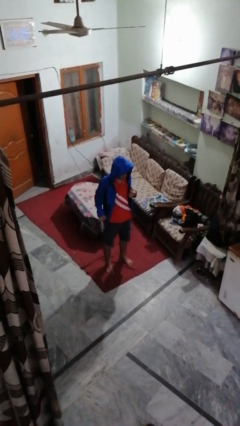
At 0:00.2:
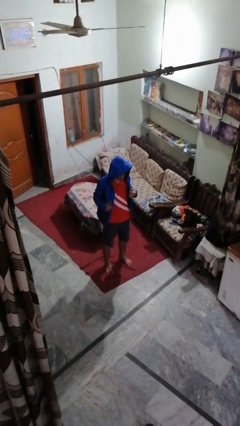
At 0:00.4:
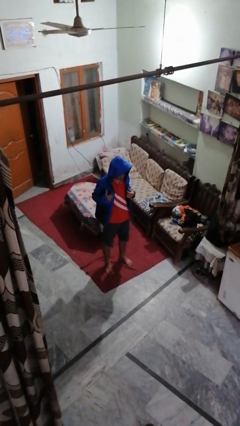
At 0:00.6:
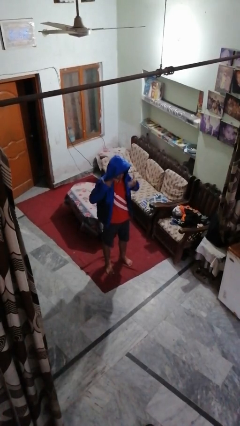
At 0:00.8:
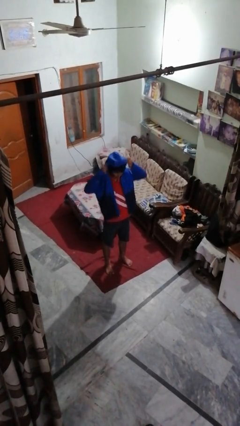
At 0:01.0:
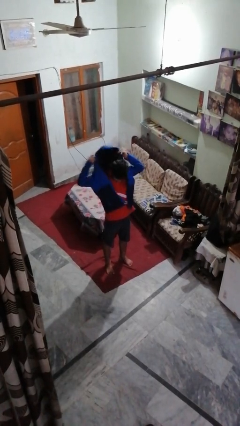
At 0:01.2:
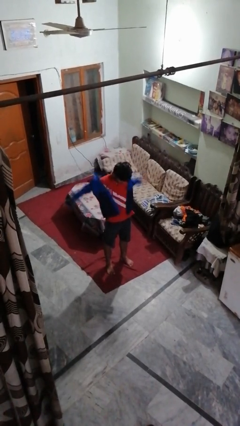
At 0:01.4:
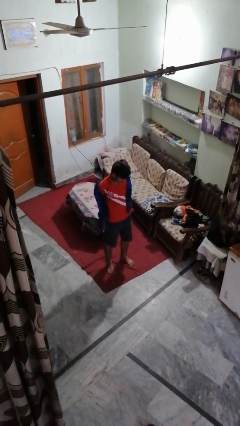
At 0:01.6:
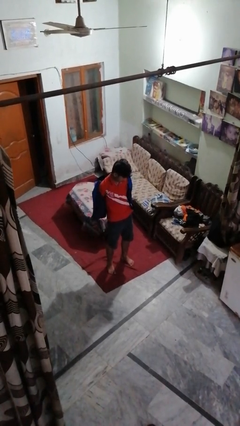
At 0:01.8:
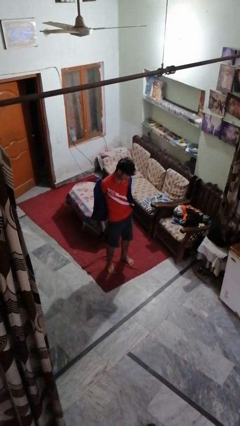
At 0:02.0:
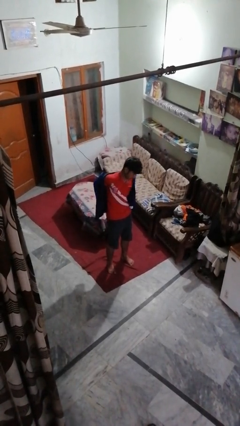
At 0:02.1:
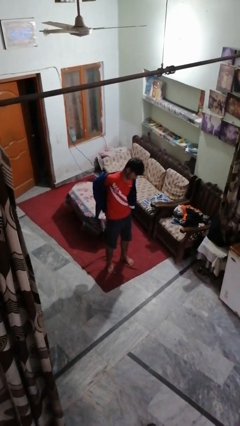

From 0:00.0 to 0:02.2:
person takes off hoodie

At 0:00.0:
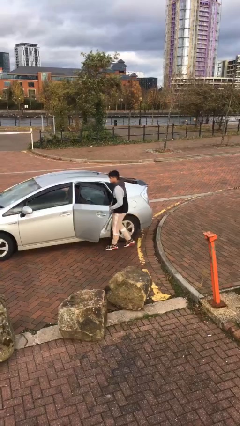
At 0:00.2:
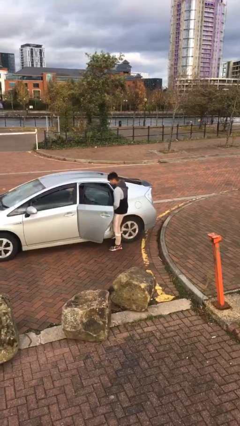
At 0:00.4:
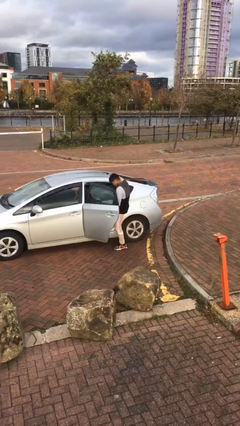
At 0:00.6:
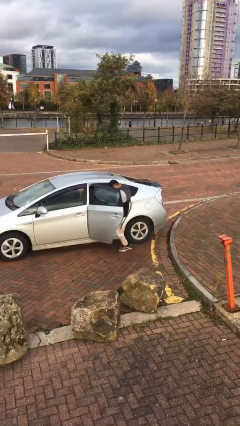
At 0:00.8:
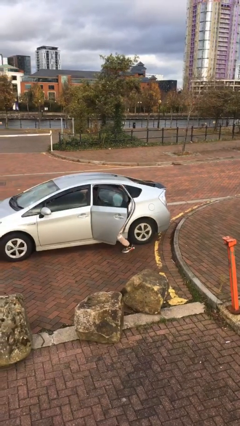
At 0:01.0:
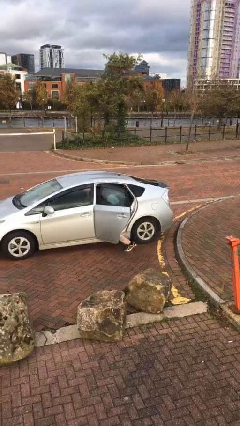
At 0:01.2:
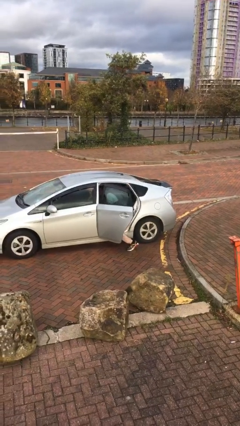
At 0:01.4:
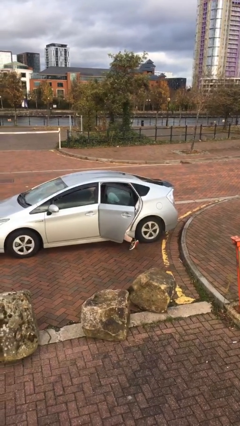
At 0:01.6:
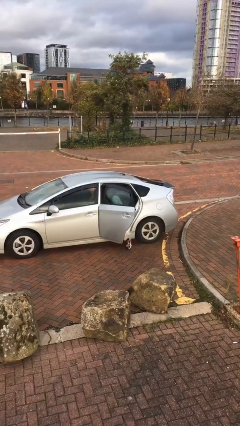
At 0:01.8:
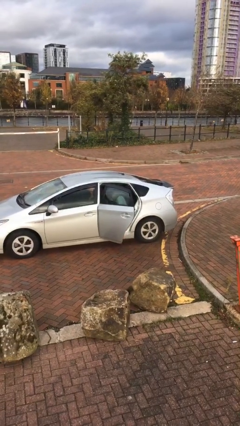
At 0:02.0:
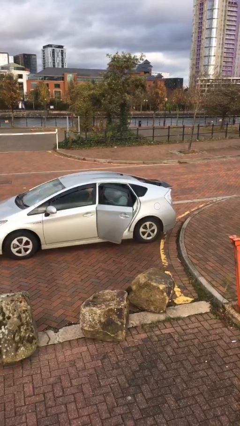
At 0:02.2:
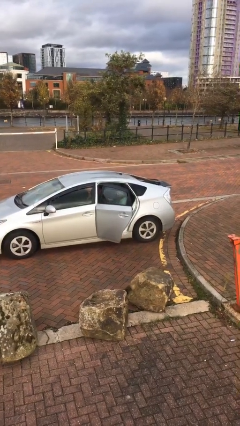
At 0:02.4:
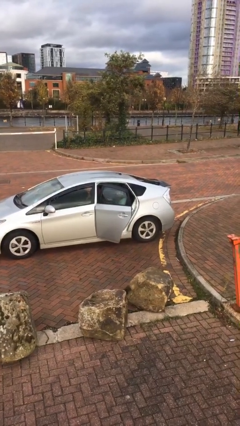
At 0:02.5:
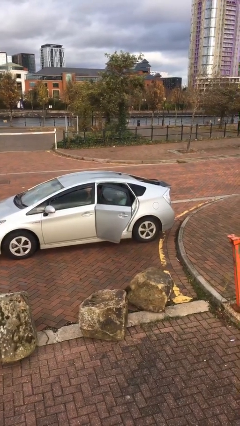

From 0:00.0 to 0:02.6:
person enters car

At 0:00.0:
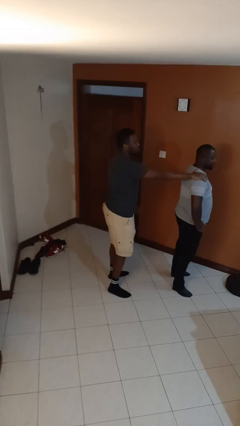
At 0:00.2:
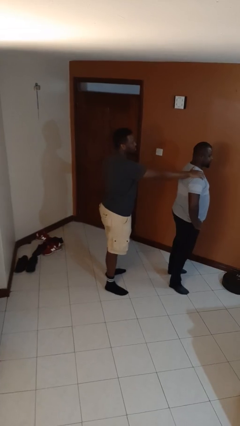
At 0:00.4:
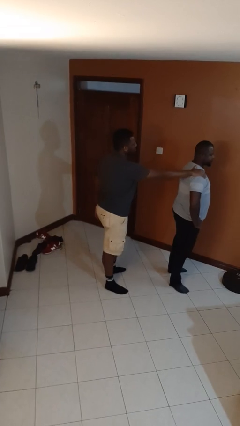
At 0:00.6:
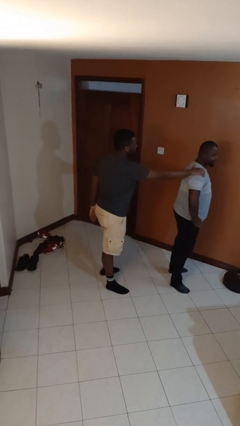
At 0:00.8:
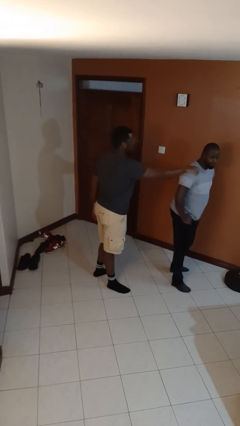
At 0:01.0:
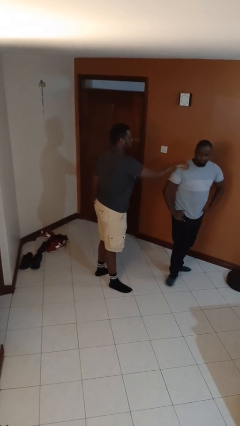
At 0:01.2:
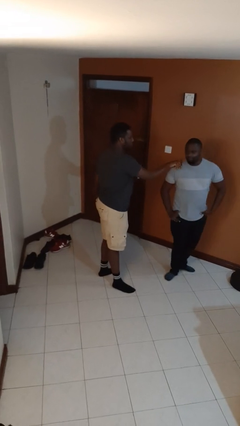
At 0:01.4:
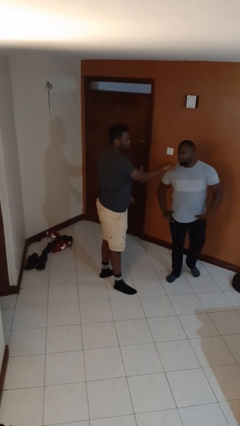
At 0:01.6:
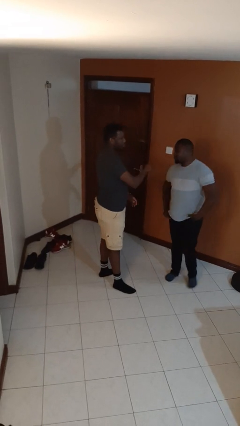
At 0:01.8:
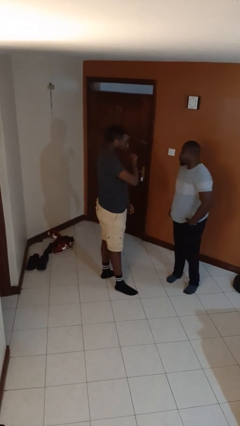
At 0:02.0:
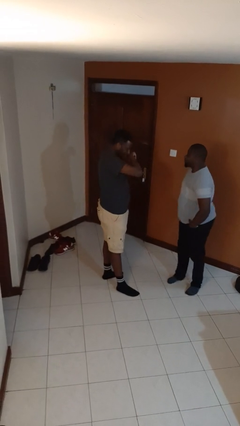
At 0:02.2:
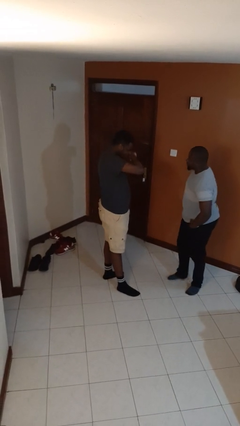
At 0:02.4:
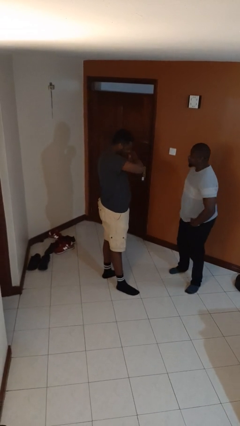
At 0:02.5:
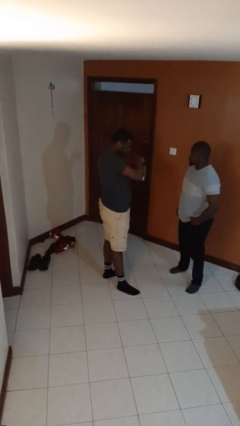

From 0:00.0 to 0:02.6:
person spins person around

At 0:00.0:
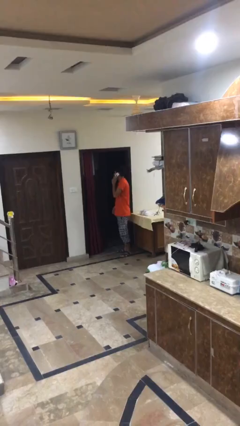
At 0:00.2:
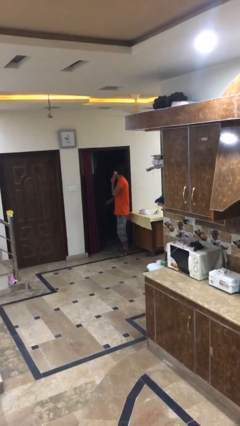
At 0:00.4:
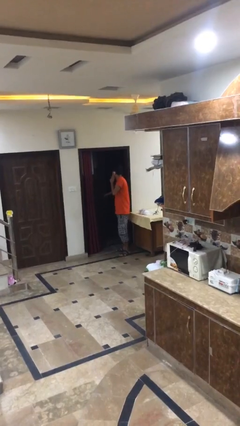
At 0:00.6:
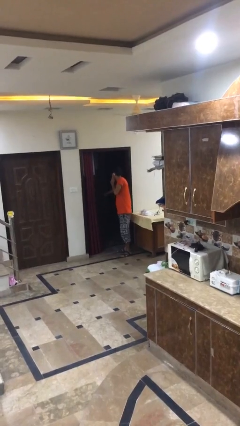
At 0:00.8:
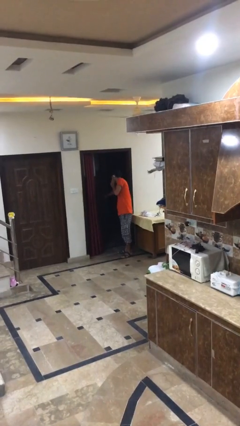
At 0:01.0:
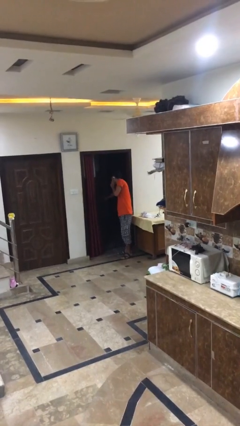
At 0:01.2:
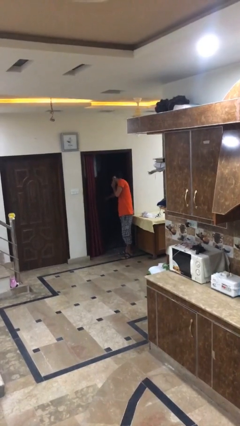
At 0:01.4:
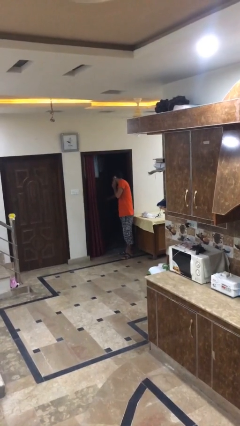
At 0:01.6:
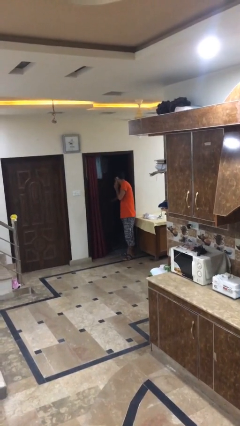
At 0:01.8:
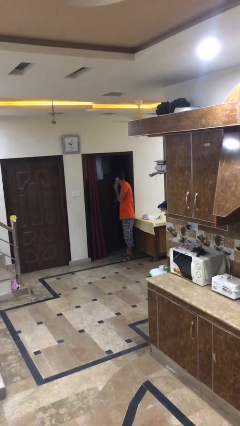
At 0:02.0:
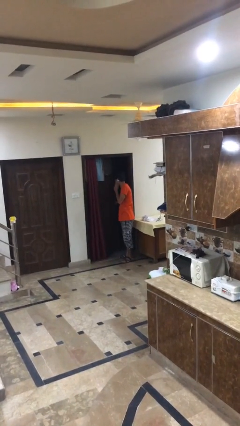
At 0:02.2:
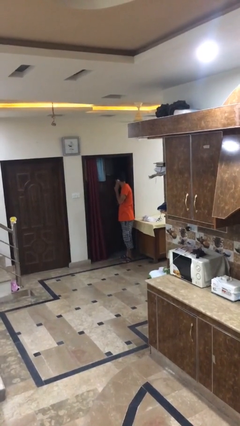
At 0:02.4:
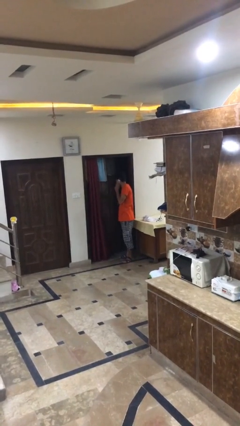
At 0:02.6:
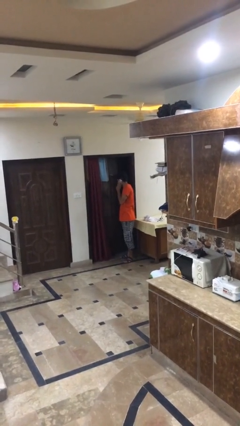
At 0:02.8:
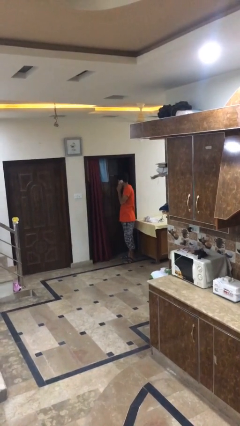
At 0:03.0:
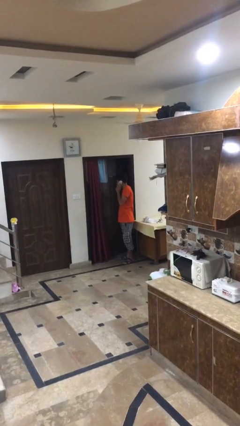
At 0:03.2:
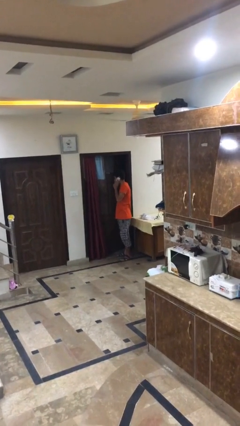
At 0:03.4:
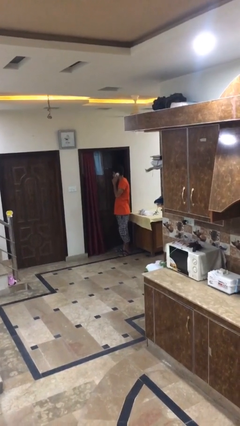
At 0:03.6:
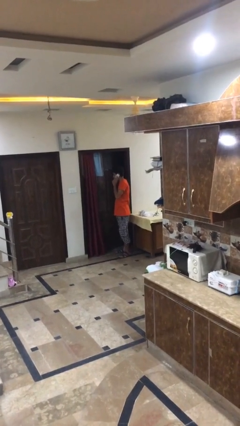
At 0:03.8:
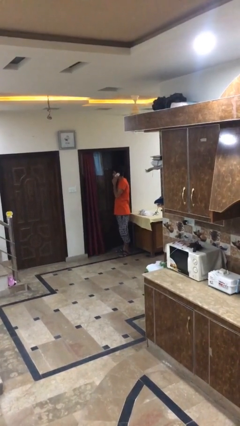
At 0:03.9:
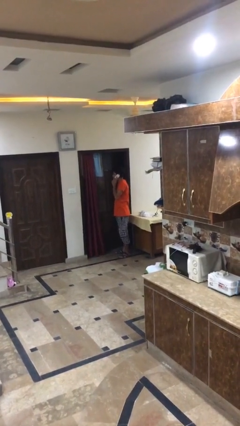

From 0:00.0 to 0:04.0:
person closes facility door

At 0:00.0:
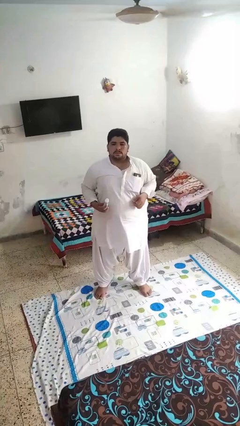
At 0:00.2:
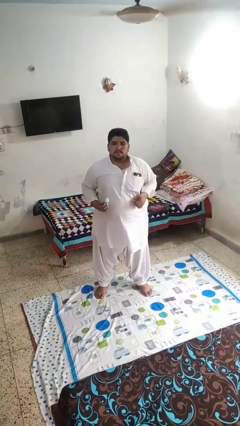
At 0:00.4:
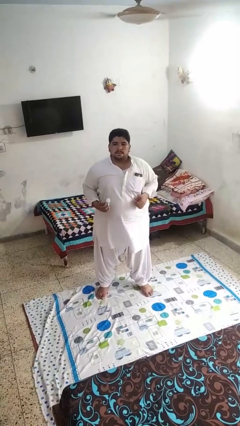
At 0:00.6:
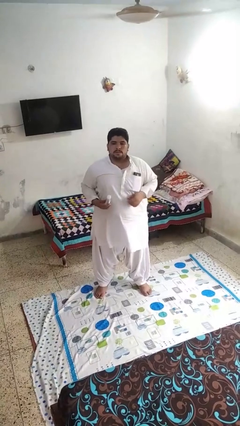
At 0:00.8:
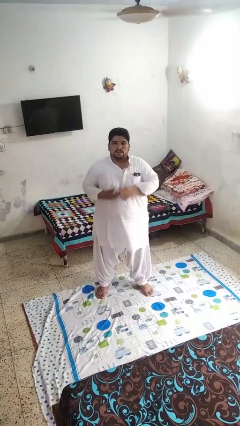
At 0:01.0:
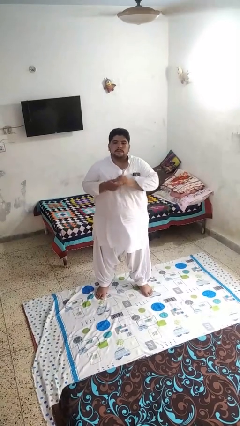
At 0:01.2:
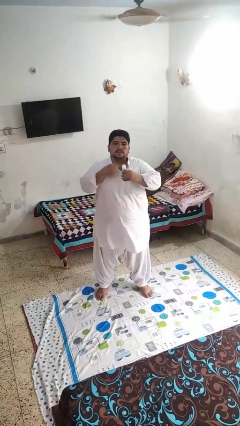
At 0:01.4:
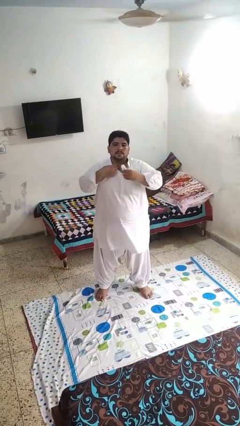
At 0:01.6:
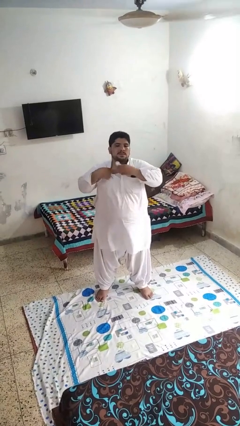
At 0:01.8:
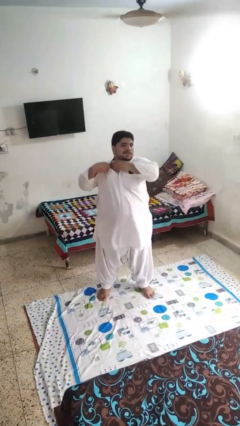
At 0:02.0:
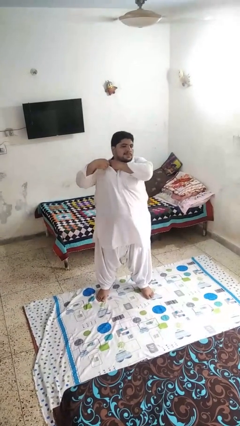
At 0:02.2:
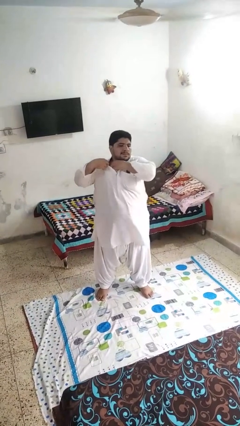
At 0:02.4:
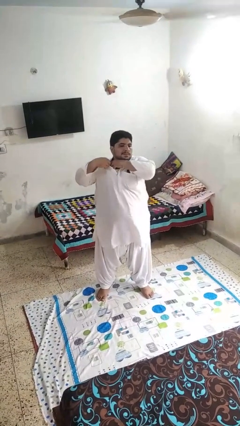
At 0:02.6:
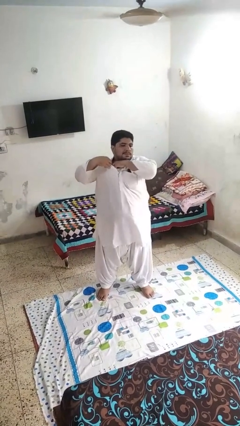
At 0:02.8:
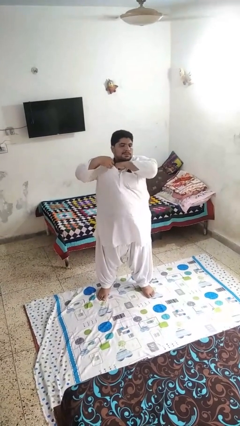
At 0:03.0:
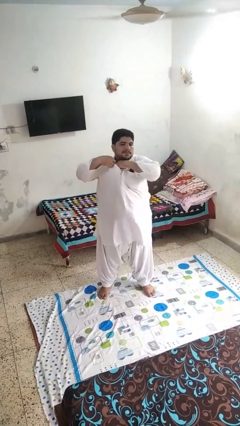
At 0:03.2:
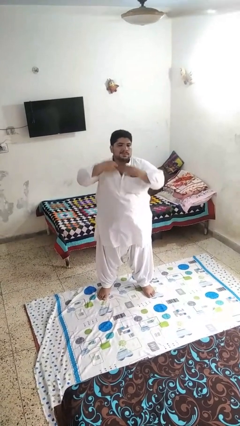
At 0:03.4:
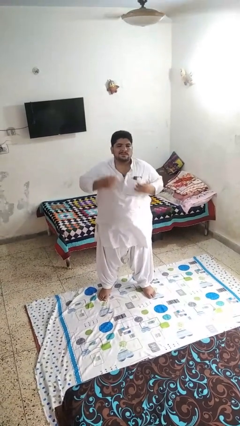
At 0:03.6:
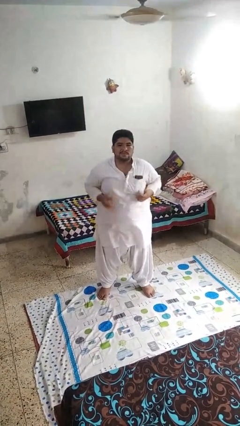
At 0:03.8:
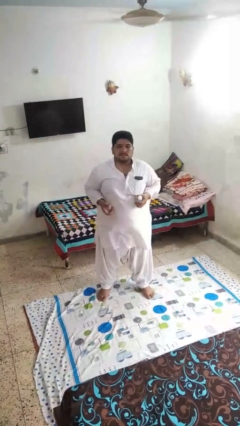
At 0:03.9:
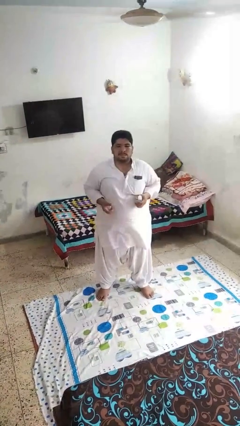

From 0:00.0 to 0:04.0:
person applies deodorant

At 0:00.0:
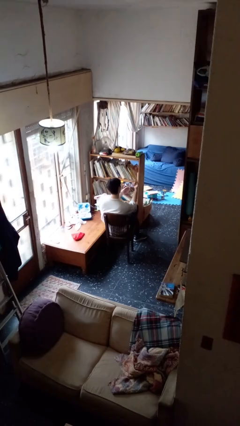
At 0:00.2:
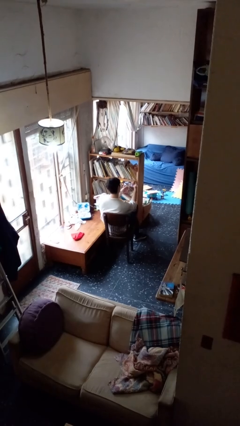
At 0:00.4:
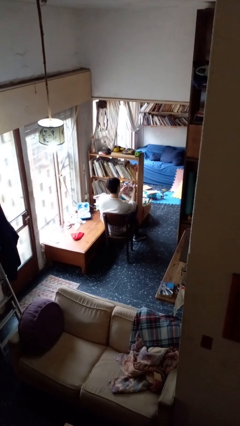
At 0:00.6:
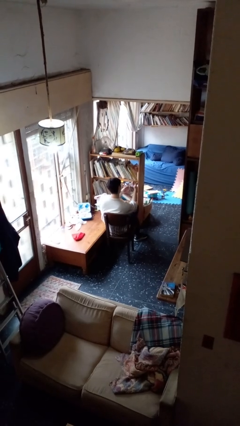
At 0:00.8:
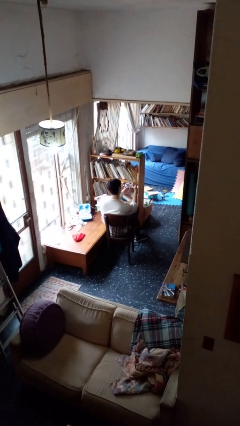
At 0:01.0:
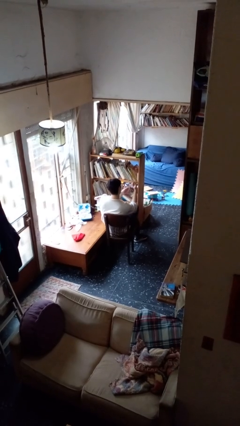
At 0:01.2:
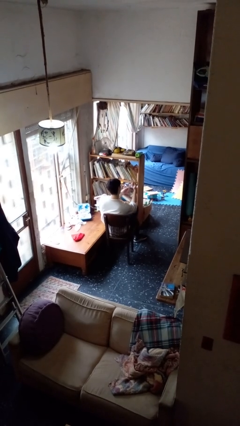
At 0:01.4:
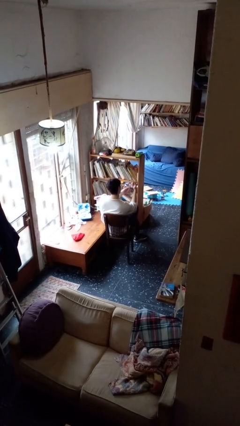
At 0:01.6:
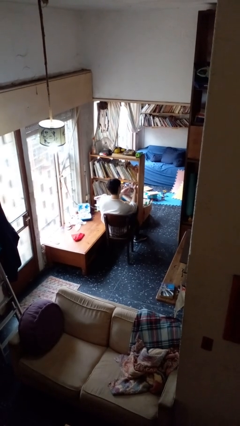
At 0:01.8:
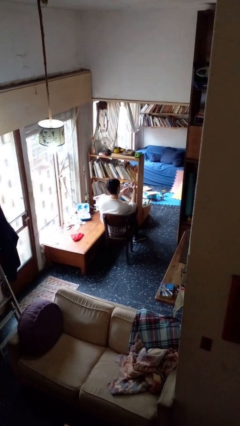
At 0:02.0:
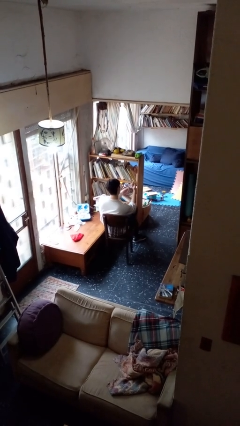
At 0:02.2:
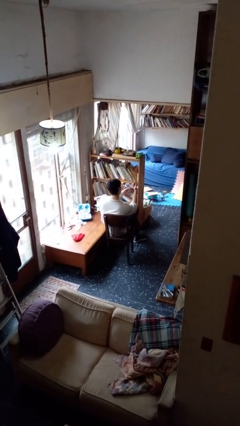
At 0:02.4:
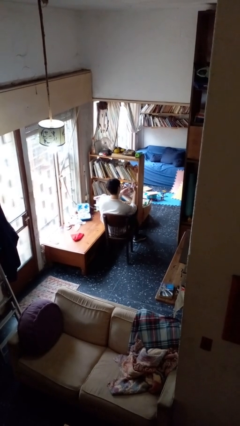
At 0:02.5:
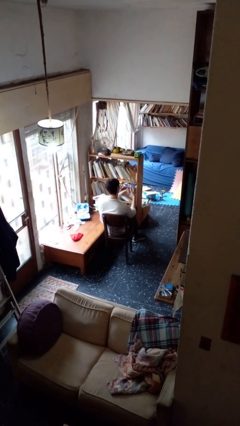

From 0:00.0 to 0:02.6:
person clips fingernails
